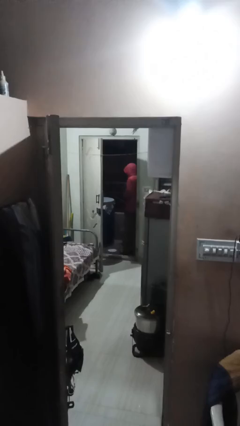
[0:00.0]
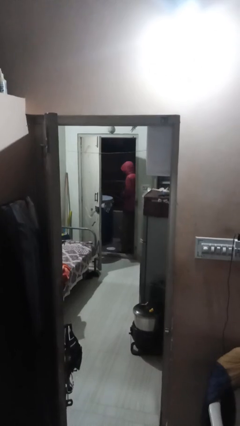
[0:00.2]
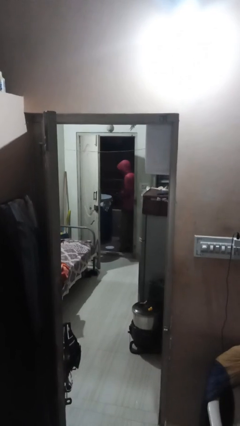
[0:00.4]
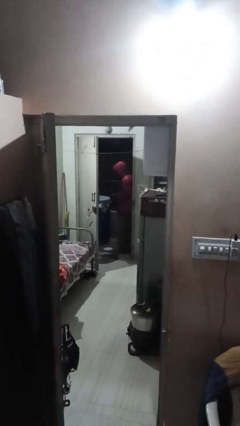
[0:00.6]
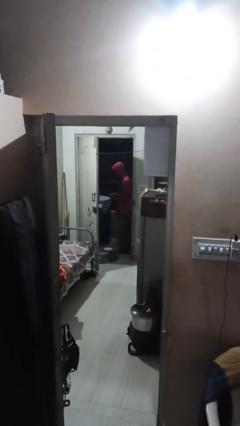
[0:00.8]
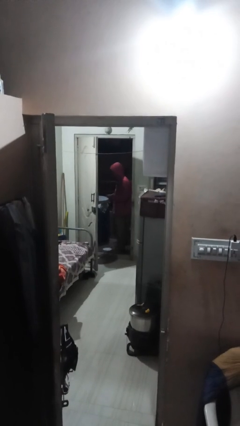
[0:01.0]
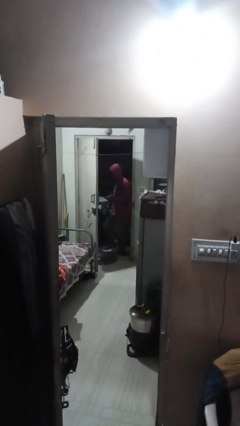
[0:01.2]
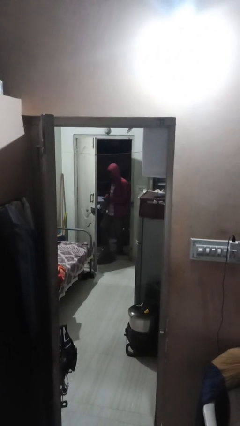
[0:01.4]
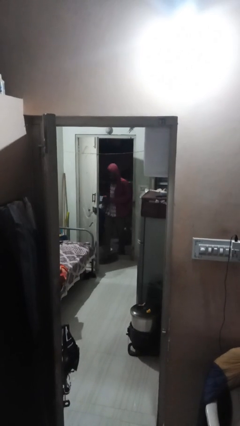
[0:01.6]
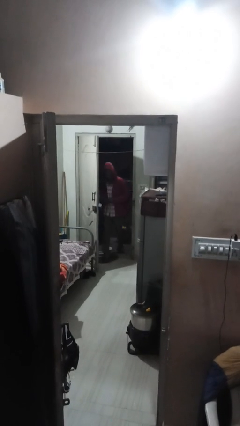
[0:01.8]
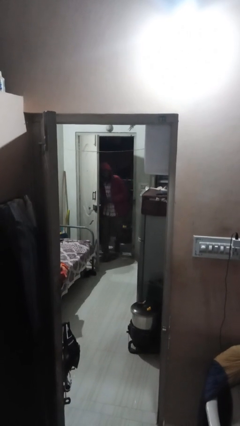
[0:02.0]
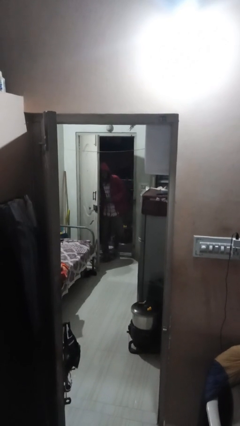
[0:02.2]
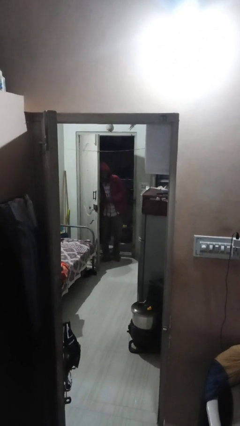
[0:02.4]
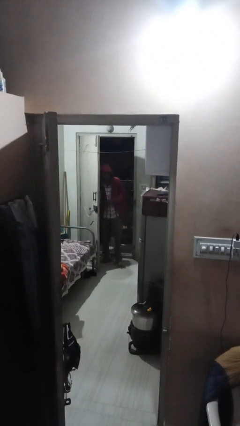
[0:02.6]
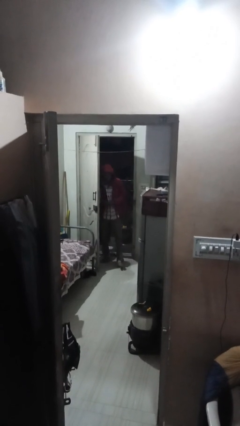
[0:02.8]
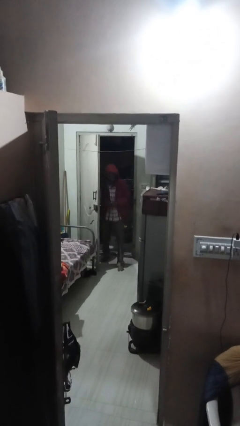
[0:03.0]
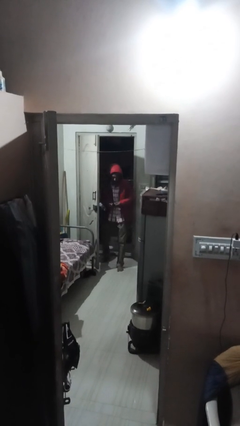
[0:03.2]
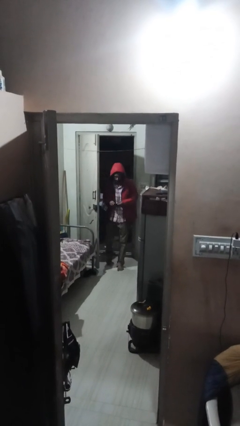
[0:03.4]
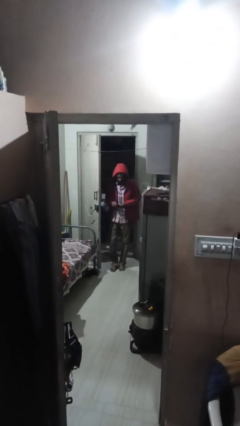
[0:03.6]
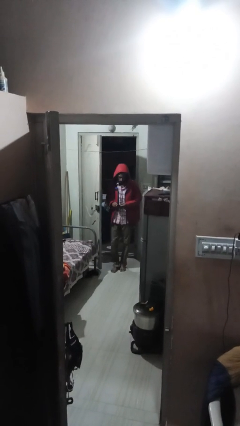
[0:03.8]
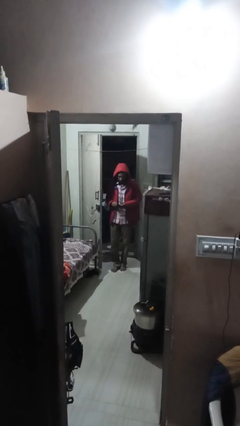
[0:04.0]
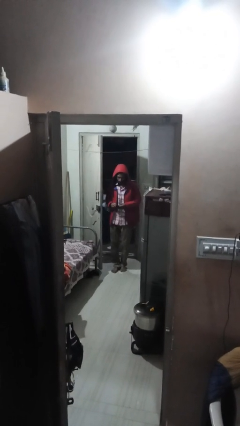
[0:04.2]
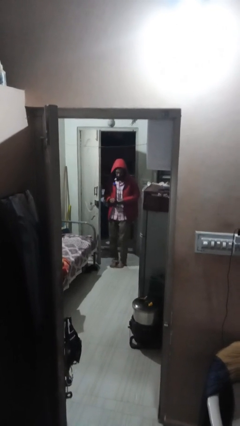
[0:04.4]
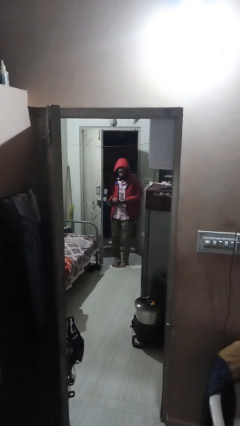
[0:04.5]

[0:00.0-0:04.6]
person enters scene through structure

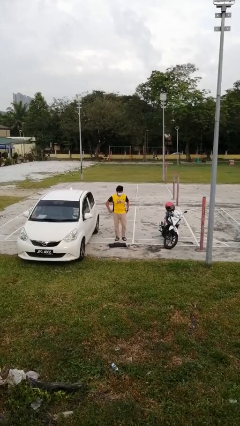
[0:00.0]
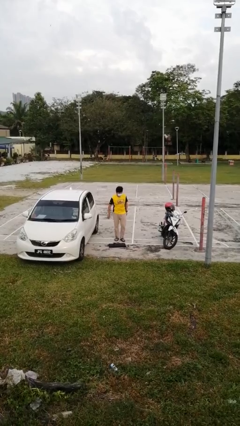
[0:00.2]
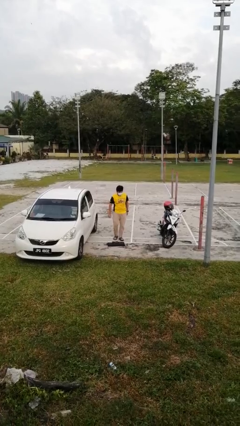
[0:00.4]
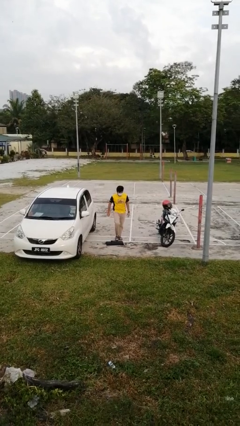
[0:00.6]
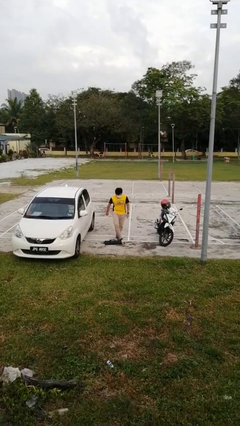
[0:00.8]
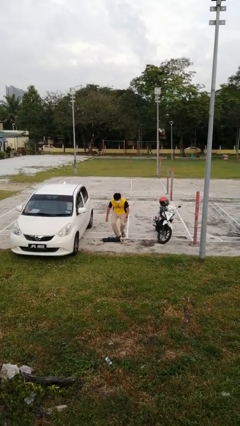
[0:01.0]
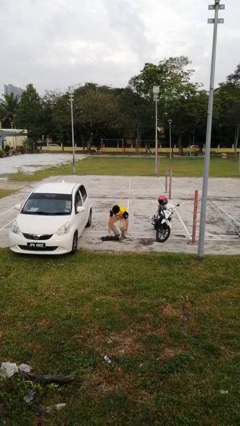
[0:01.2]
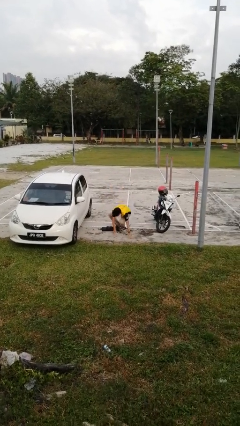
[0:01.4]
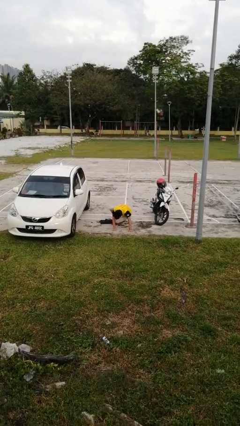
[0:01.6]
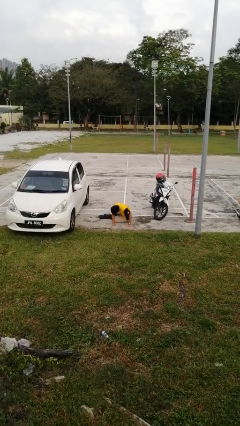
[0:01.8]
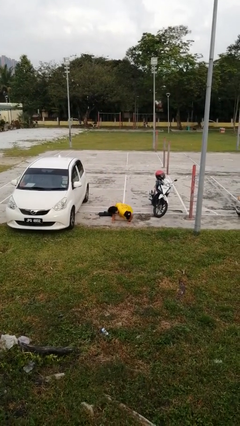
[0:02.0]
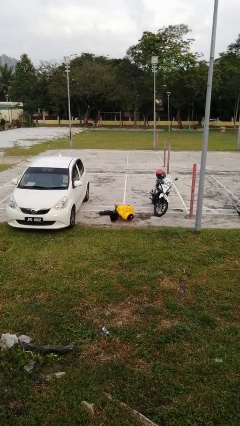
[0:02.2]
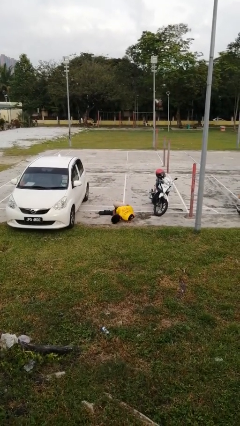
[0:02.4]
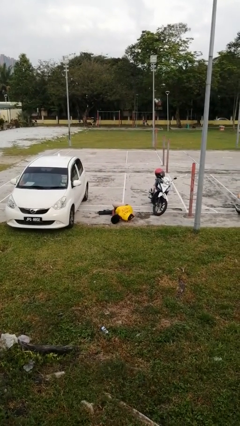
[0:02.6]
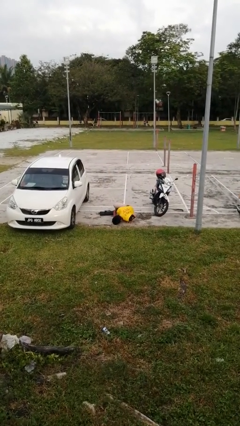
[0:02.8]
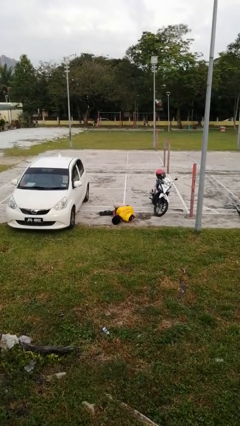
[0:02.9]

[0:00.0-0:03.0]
person trips on object on floor

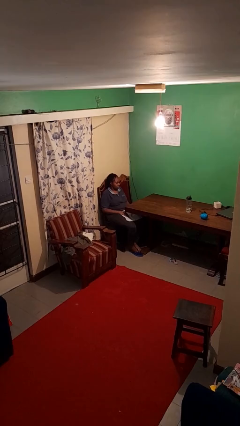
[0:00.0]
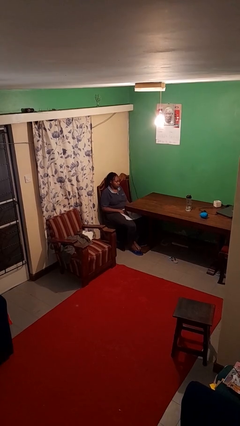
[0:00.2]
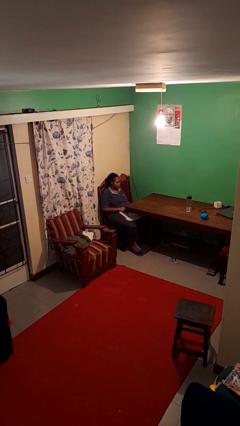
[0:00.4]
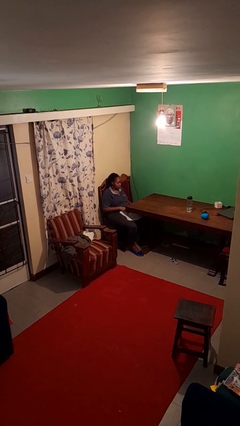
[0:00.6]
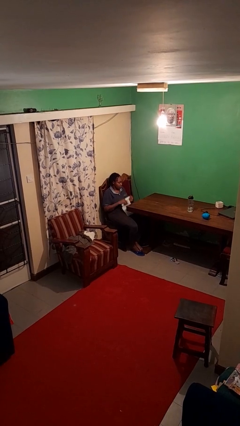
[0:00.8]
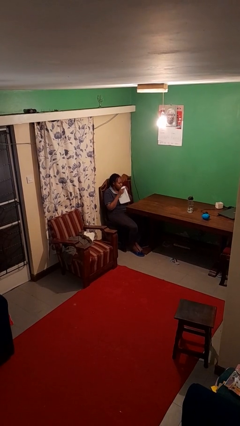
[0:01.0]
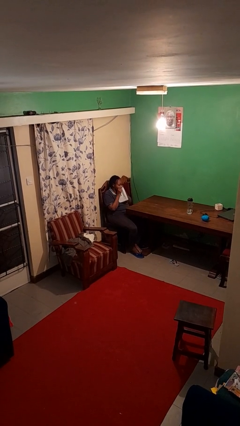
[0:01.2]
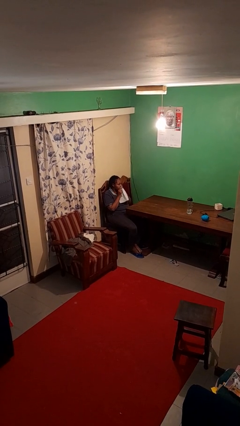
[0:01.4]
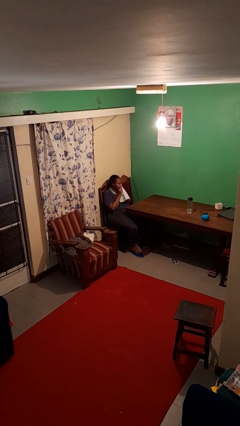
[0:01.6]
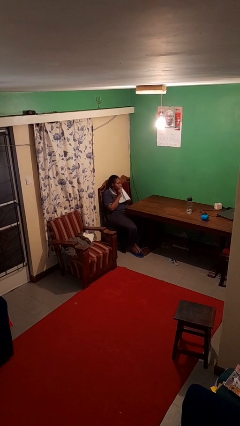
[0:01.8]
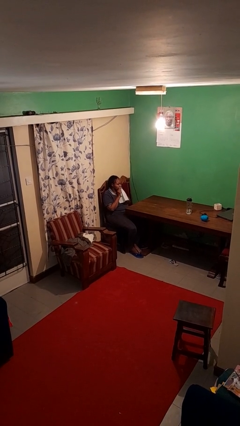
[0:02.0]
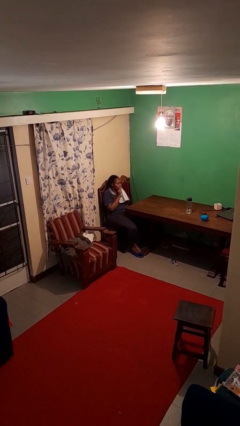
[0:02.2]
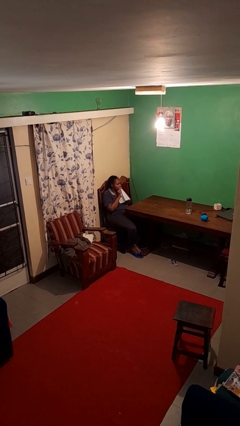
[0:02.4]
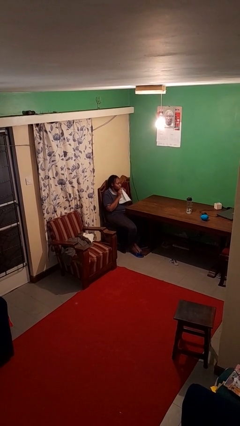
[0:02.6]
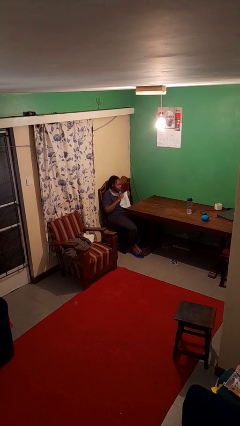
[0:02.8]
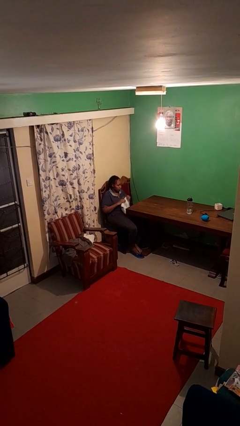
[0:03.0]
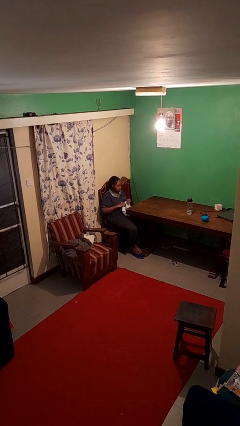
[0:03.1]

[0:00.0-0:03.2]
person wipes mouth with napkin

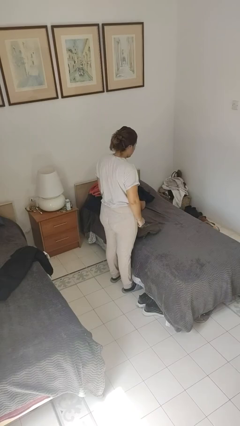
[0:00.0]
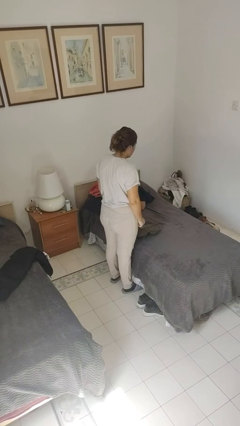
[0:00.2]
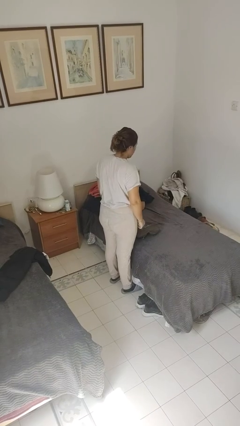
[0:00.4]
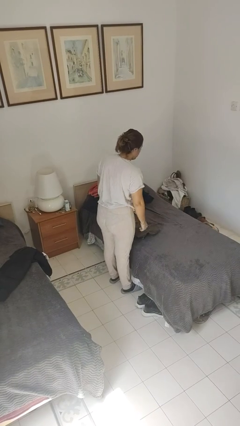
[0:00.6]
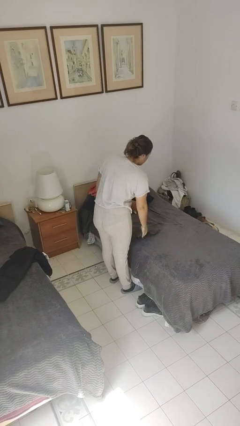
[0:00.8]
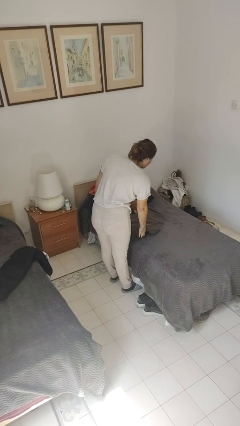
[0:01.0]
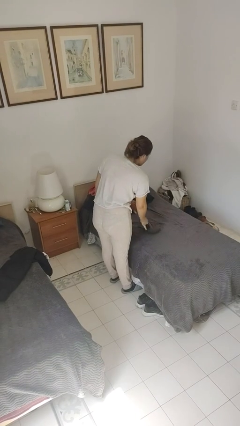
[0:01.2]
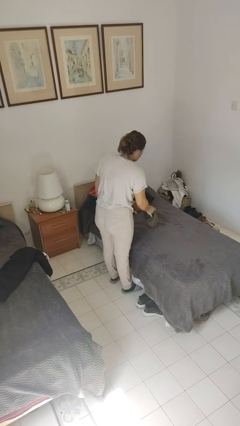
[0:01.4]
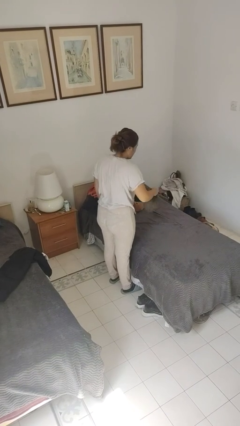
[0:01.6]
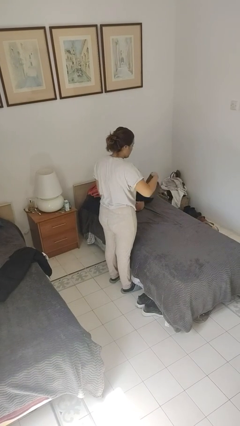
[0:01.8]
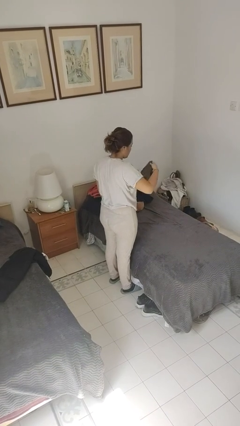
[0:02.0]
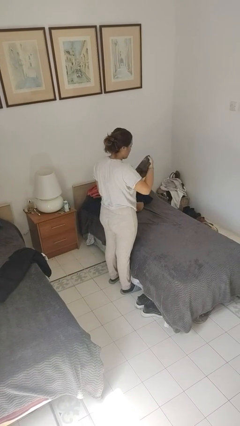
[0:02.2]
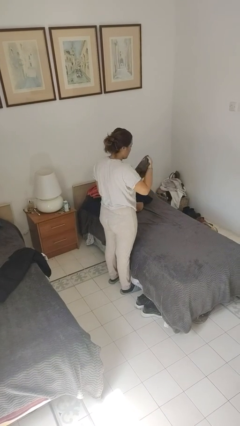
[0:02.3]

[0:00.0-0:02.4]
person picks up object from bed

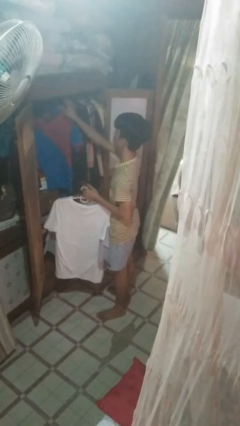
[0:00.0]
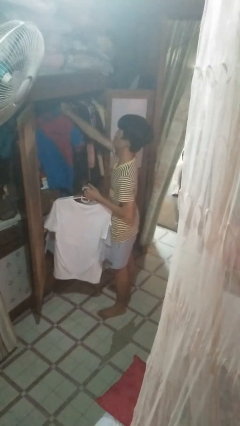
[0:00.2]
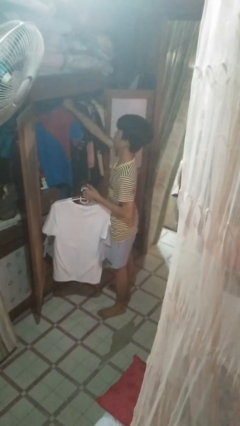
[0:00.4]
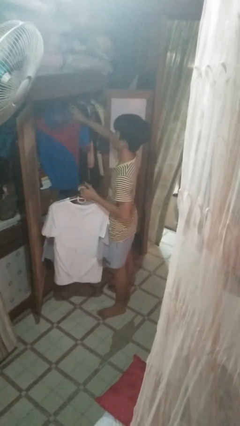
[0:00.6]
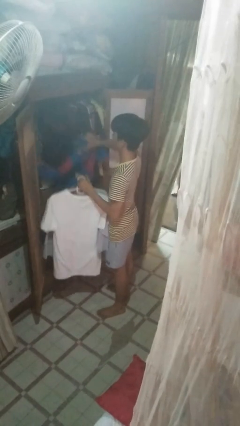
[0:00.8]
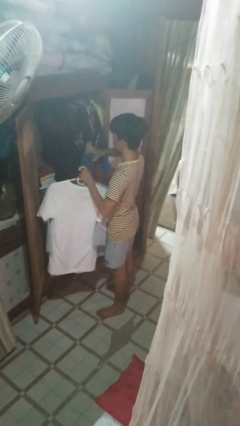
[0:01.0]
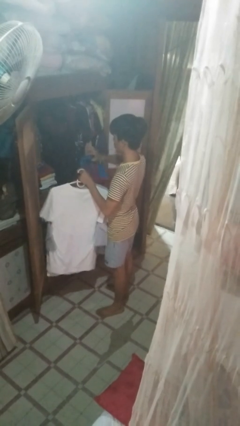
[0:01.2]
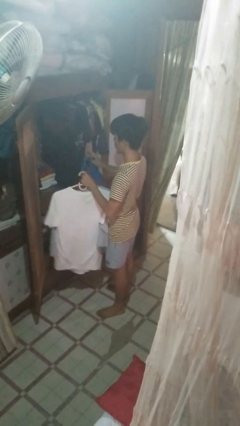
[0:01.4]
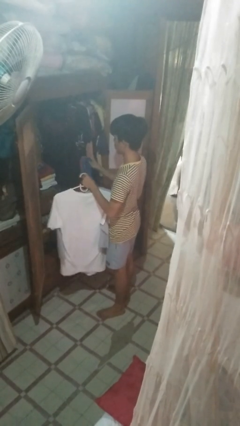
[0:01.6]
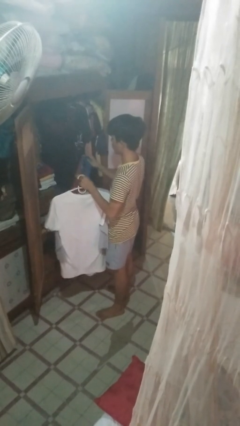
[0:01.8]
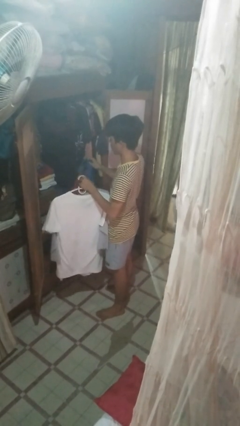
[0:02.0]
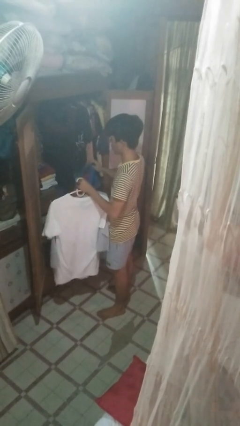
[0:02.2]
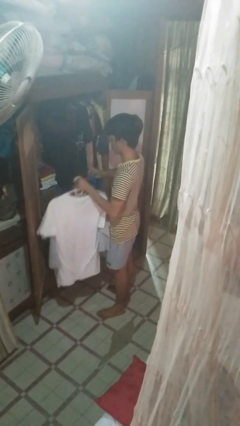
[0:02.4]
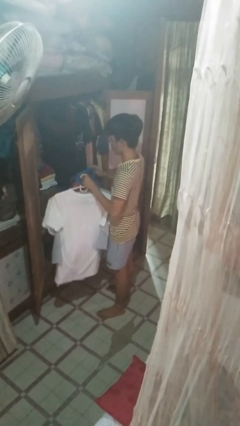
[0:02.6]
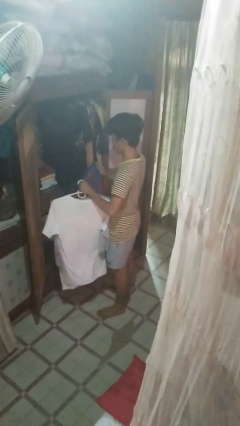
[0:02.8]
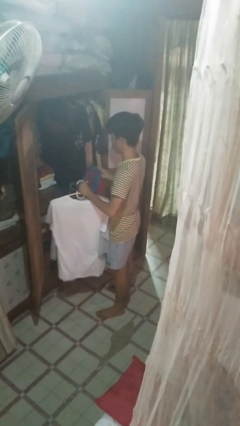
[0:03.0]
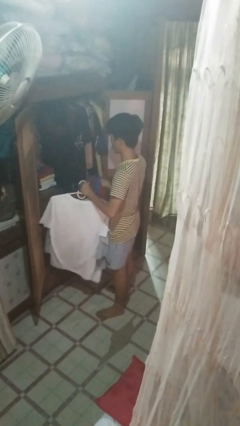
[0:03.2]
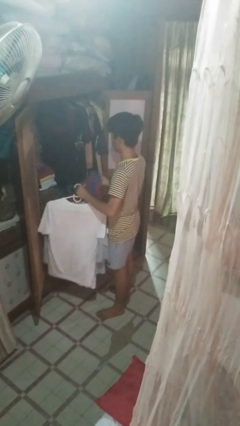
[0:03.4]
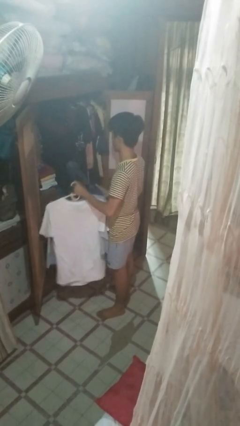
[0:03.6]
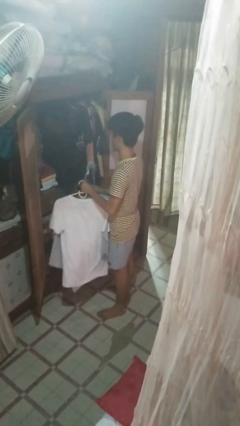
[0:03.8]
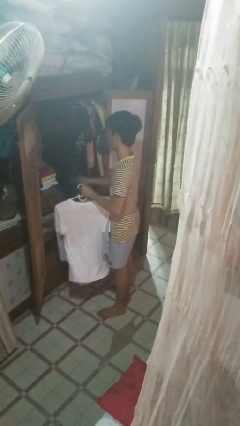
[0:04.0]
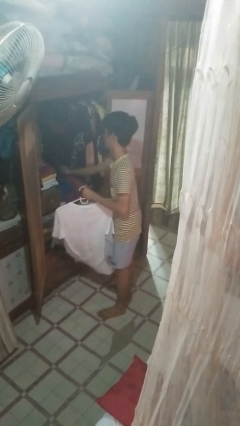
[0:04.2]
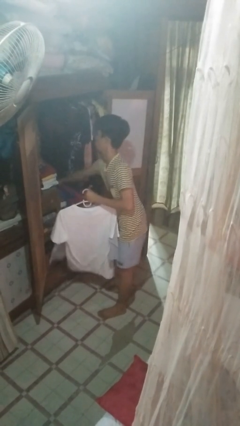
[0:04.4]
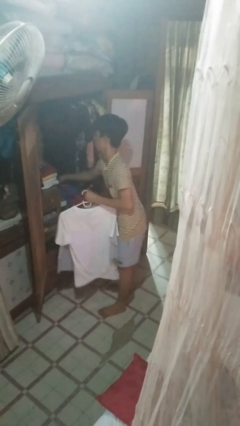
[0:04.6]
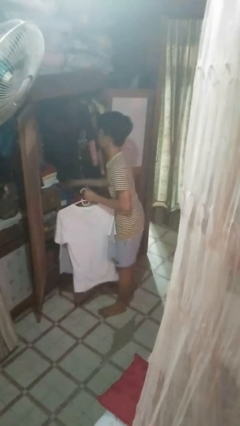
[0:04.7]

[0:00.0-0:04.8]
person takes clothes from closet
